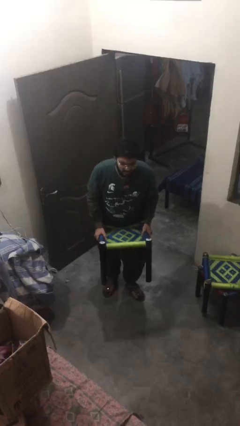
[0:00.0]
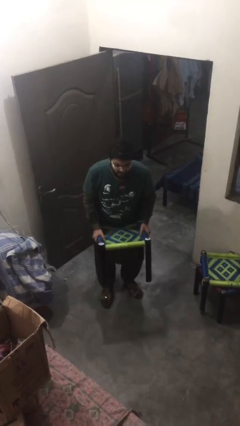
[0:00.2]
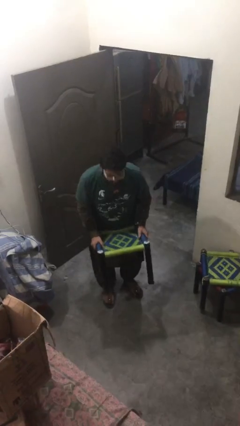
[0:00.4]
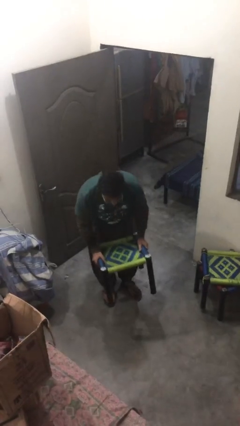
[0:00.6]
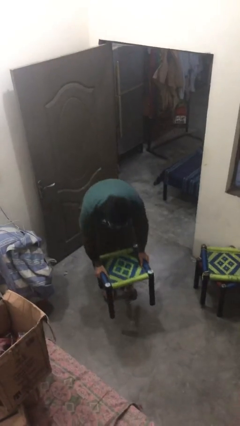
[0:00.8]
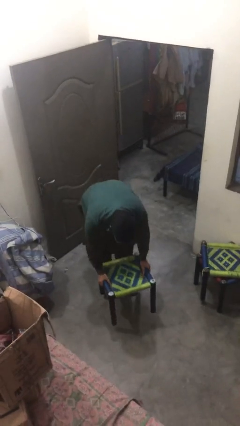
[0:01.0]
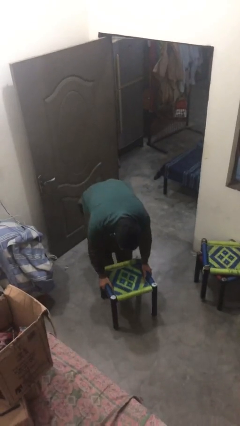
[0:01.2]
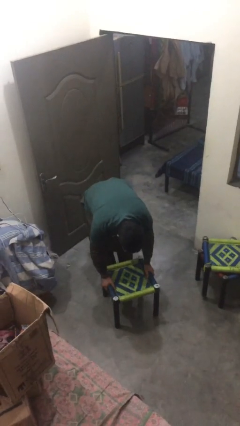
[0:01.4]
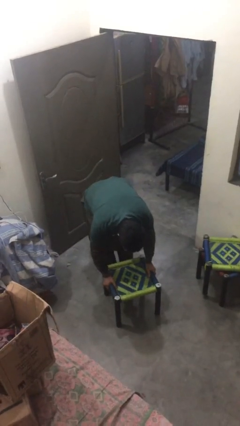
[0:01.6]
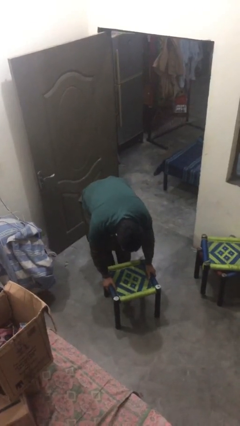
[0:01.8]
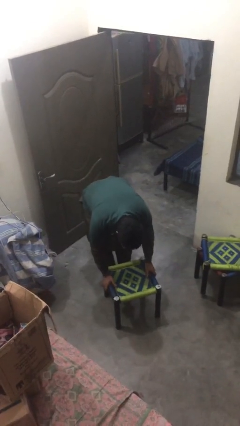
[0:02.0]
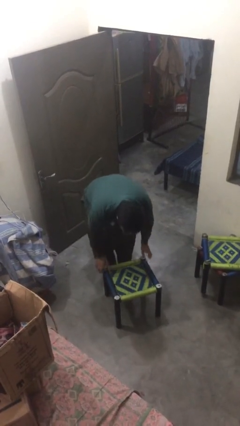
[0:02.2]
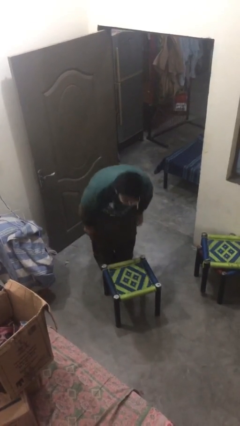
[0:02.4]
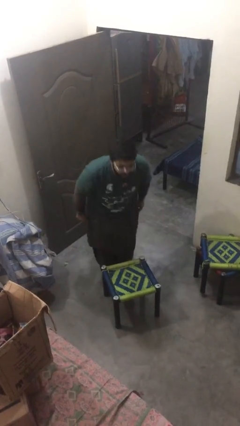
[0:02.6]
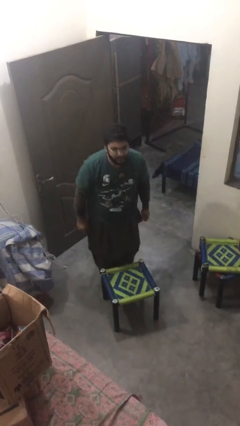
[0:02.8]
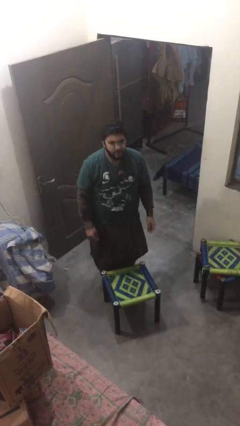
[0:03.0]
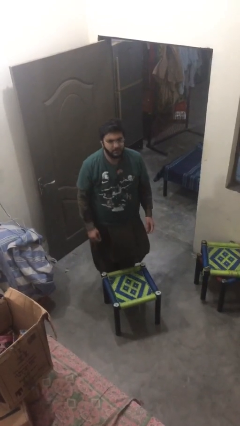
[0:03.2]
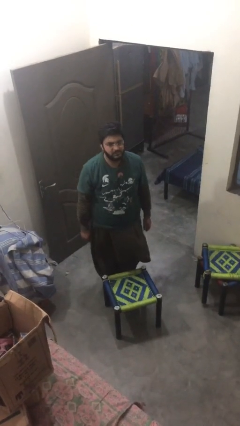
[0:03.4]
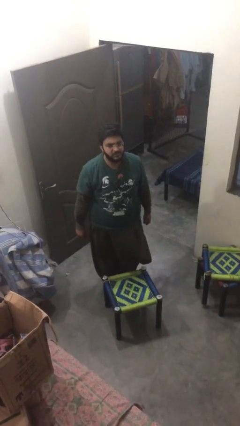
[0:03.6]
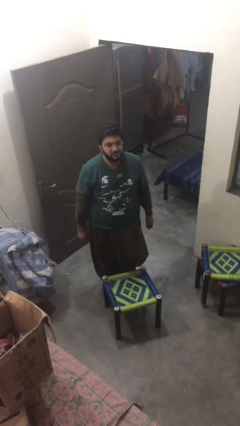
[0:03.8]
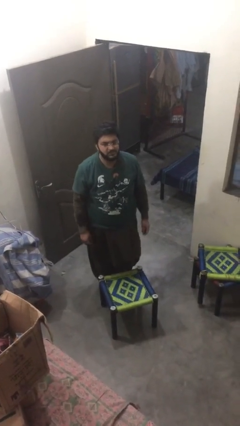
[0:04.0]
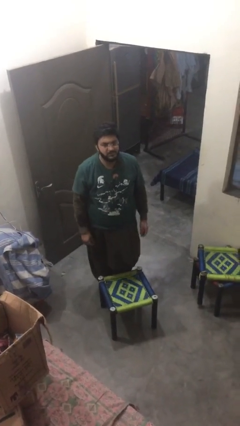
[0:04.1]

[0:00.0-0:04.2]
person puts down object on floor

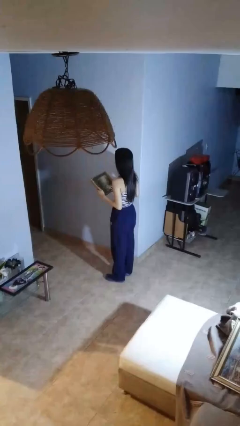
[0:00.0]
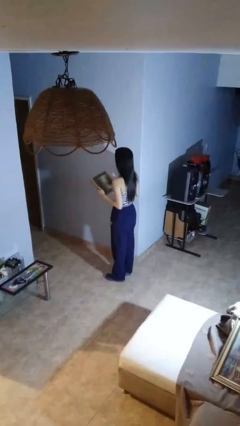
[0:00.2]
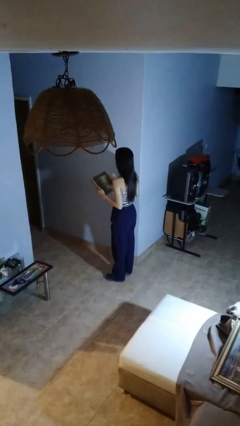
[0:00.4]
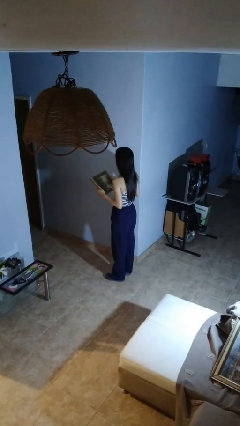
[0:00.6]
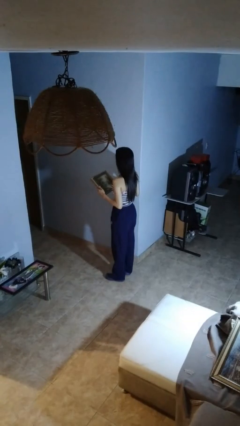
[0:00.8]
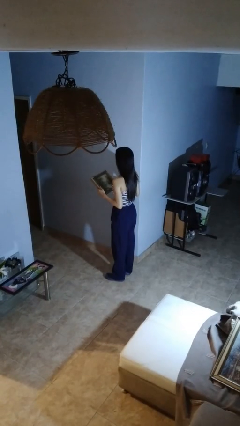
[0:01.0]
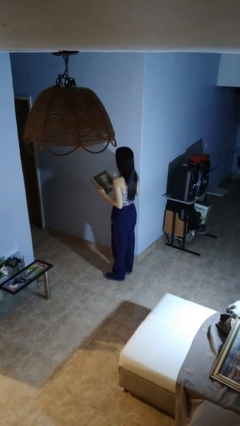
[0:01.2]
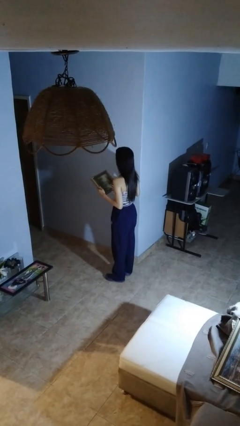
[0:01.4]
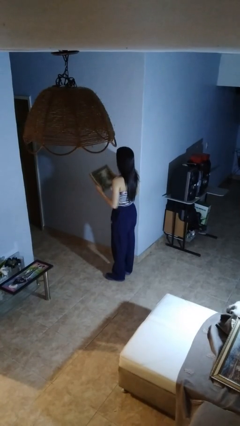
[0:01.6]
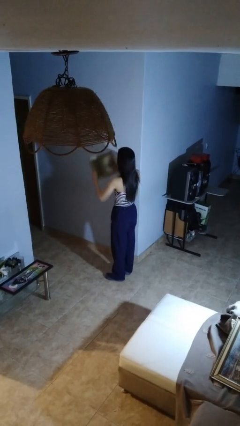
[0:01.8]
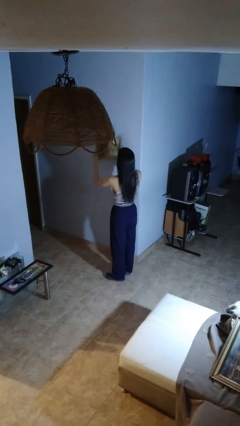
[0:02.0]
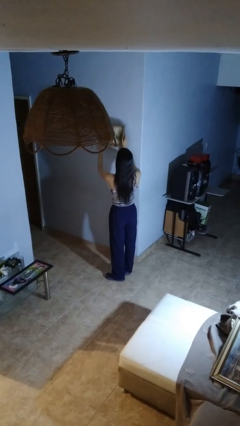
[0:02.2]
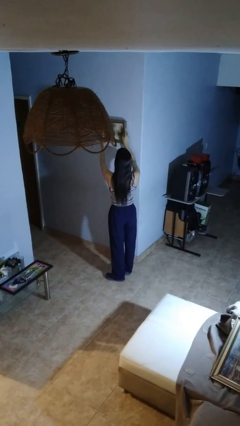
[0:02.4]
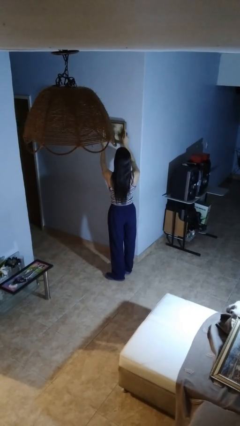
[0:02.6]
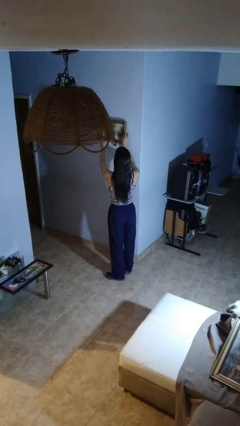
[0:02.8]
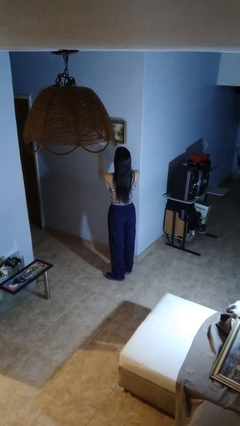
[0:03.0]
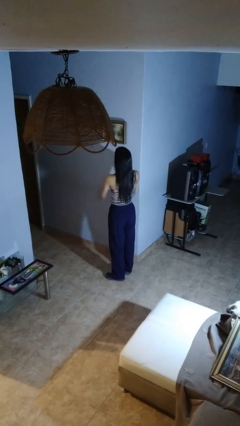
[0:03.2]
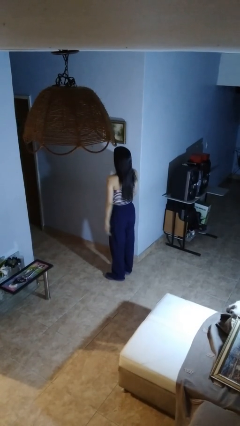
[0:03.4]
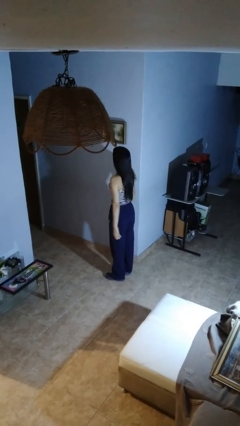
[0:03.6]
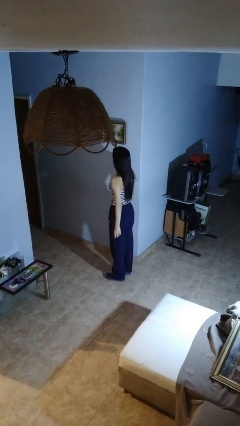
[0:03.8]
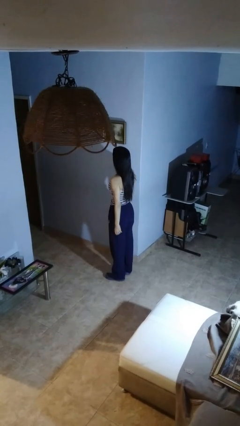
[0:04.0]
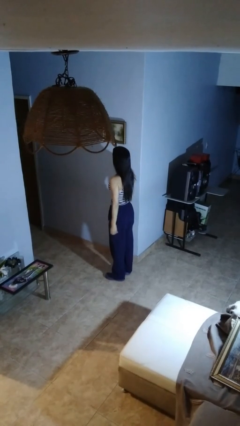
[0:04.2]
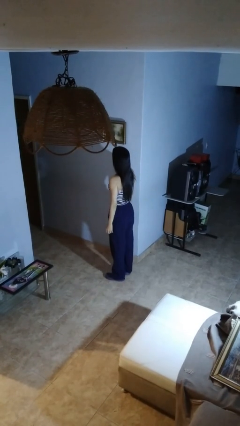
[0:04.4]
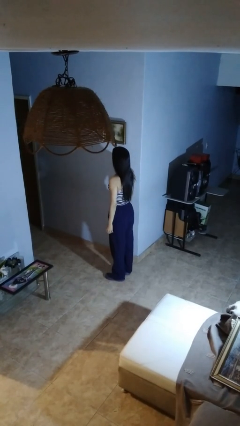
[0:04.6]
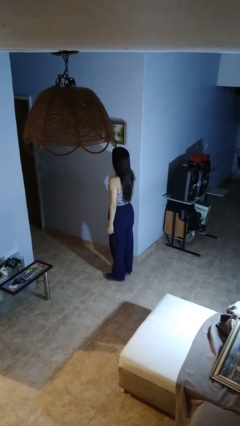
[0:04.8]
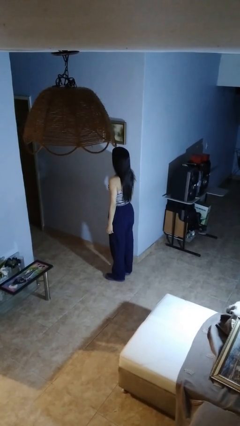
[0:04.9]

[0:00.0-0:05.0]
person puts up picture frame

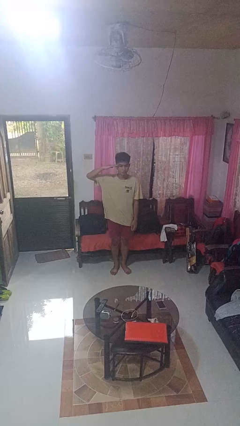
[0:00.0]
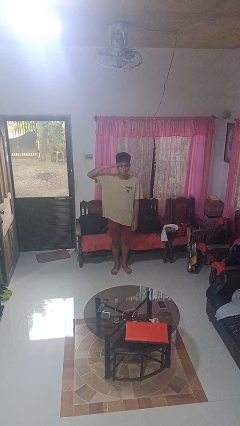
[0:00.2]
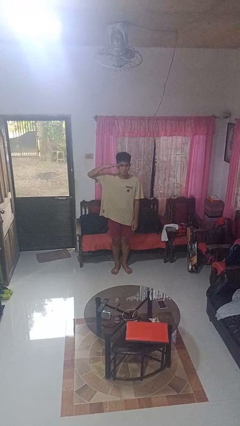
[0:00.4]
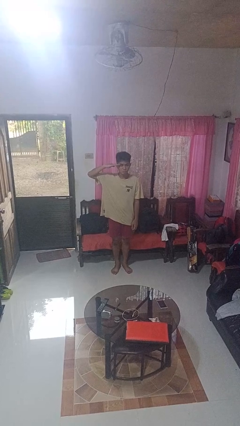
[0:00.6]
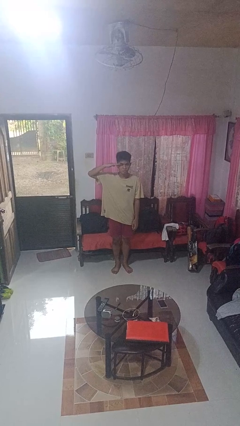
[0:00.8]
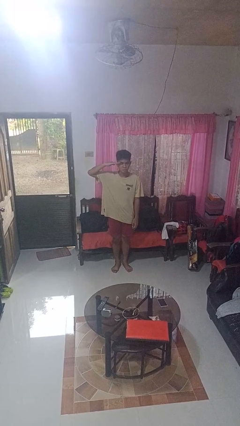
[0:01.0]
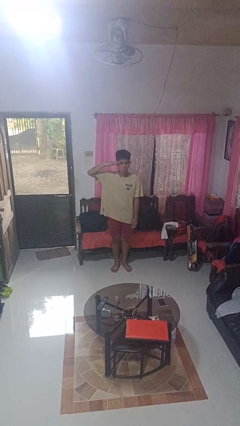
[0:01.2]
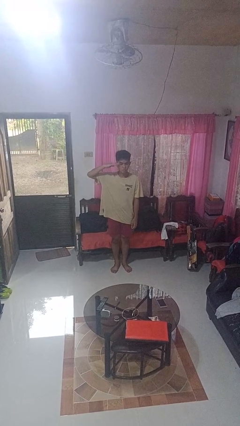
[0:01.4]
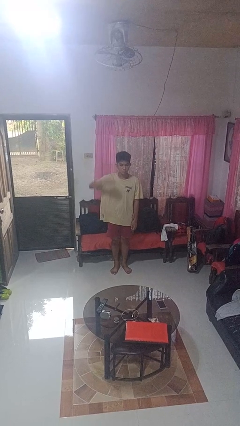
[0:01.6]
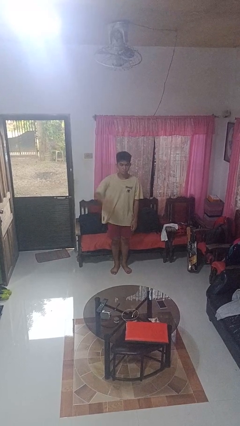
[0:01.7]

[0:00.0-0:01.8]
person salutes

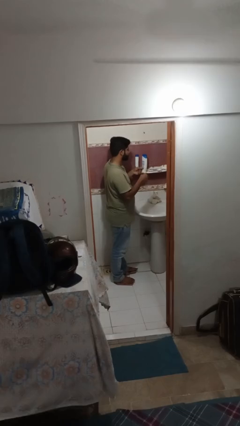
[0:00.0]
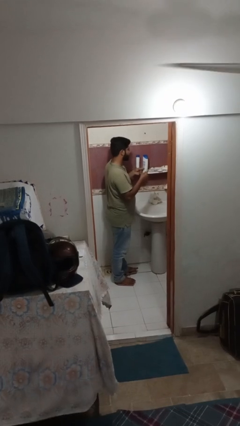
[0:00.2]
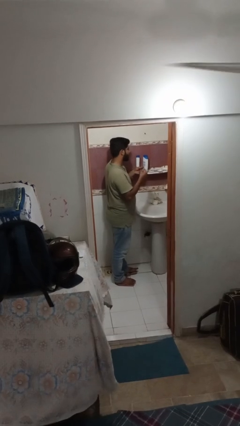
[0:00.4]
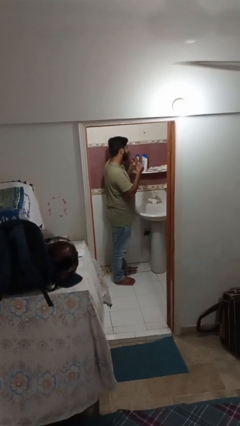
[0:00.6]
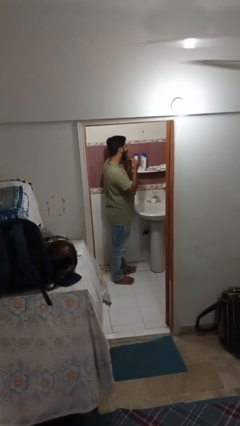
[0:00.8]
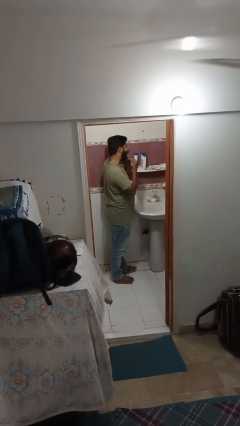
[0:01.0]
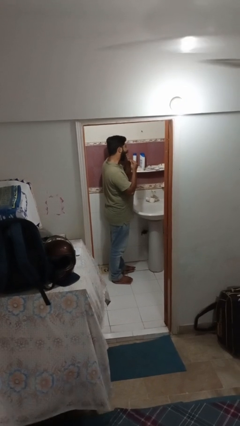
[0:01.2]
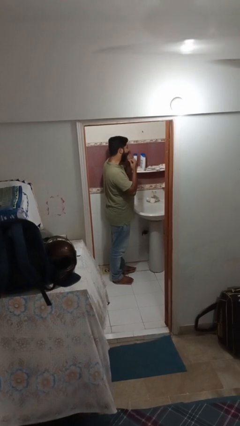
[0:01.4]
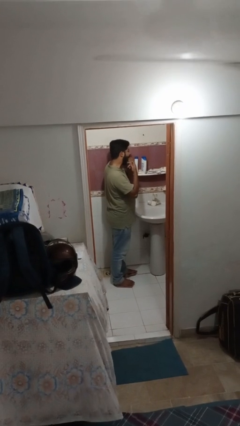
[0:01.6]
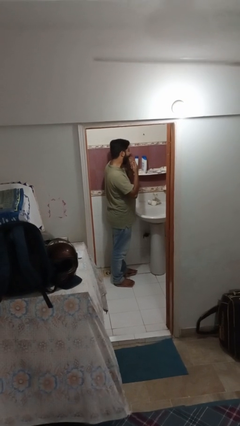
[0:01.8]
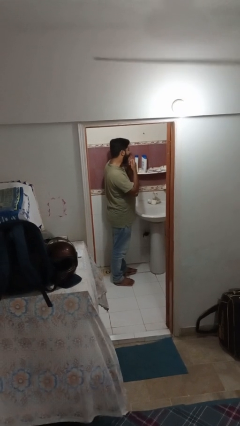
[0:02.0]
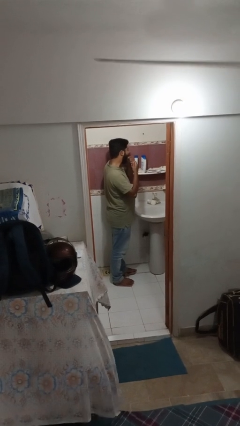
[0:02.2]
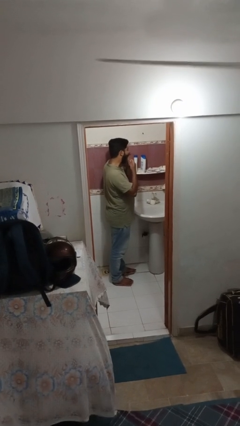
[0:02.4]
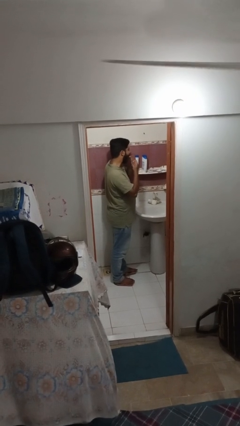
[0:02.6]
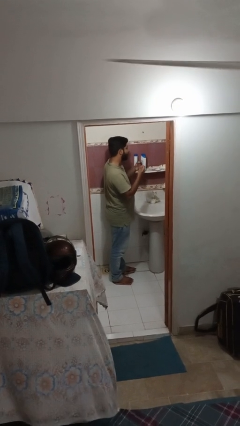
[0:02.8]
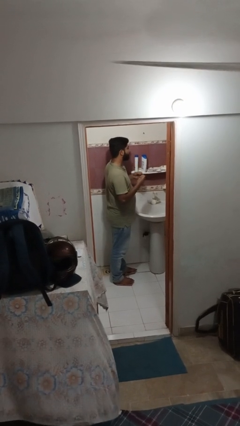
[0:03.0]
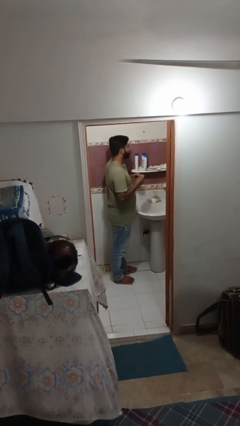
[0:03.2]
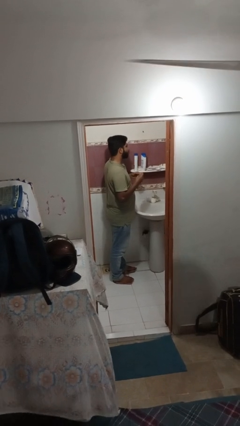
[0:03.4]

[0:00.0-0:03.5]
person flosses

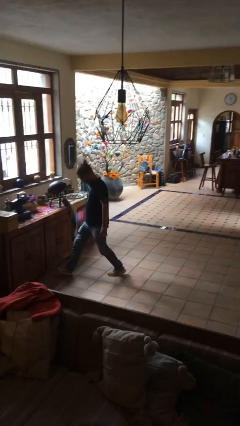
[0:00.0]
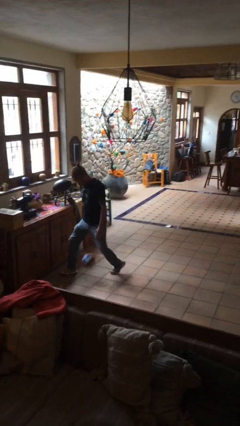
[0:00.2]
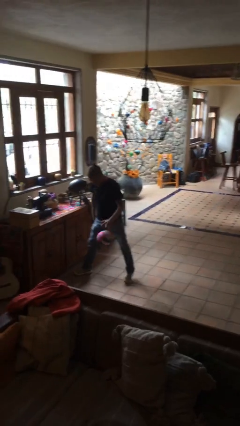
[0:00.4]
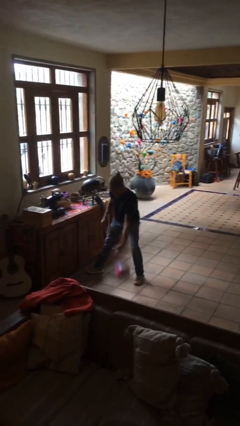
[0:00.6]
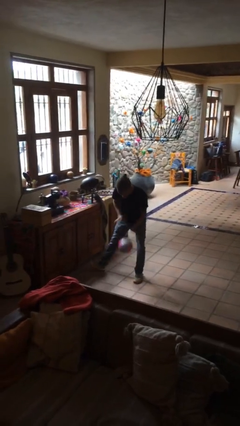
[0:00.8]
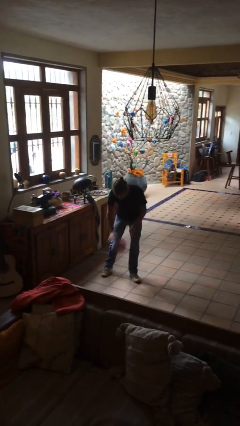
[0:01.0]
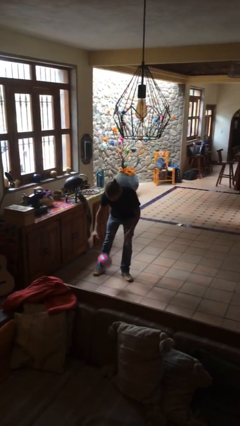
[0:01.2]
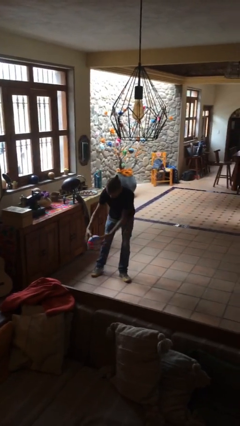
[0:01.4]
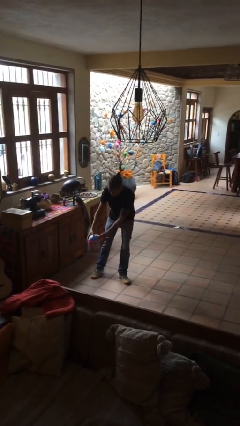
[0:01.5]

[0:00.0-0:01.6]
person bounces ball on floor

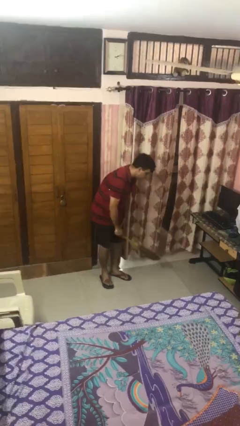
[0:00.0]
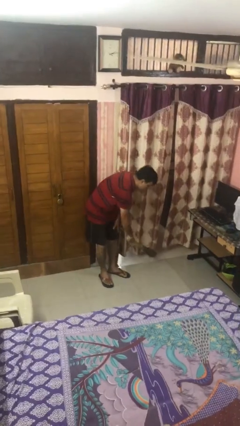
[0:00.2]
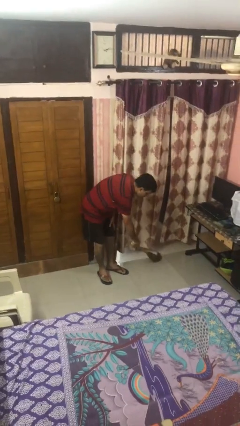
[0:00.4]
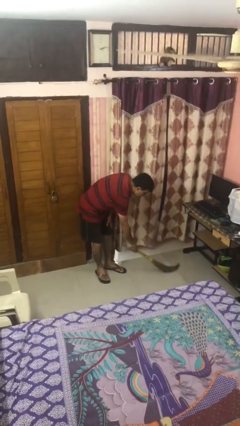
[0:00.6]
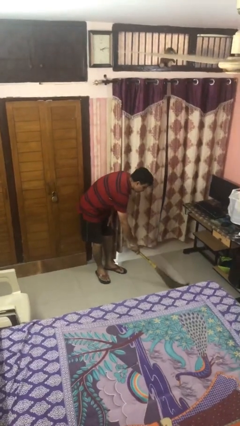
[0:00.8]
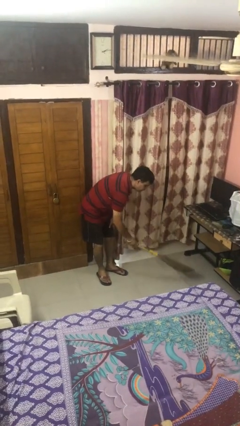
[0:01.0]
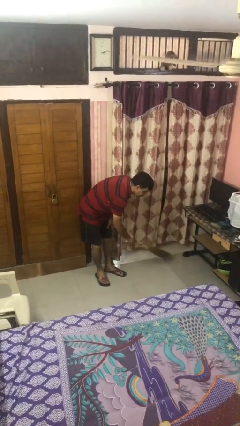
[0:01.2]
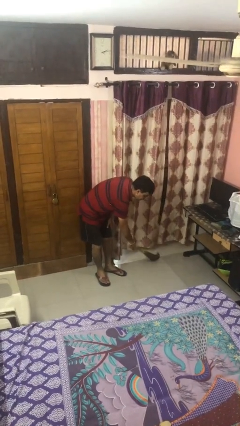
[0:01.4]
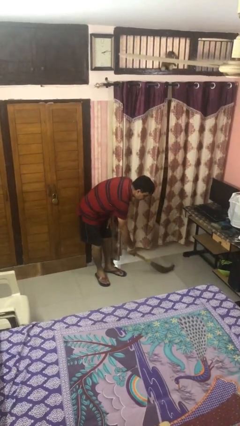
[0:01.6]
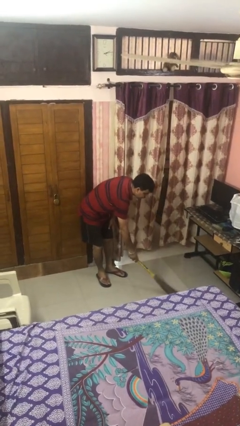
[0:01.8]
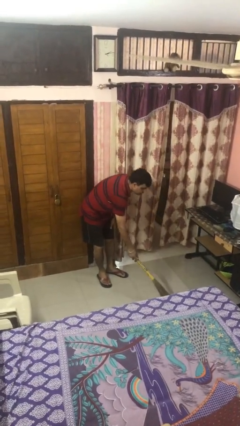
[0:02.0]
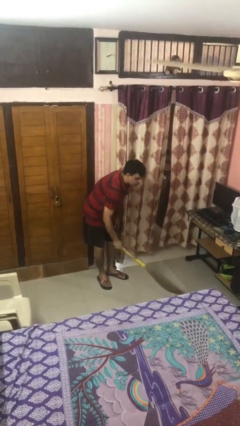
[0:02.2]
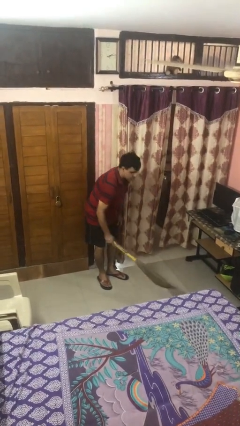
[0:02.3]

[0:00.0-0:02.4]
person sweeps floor
